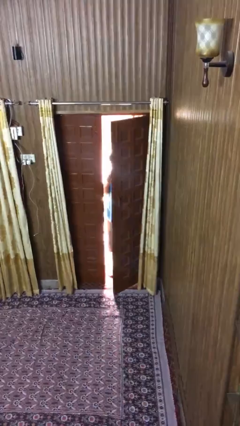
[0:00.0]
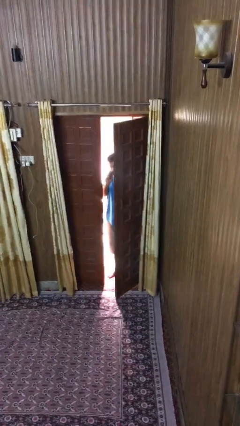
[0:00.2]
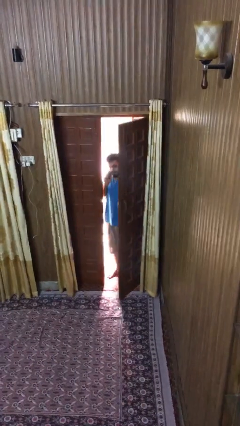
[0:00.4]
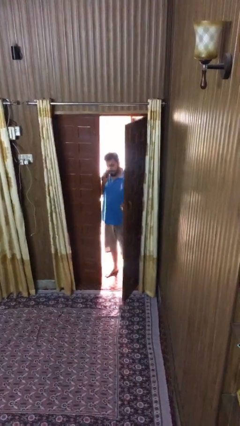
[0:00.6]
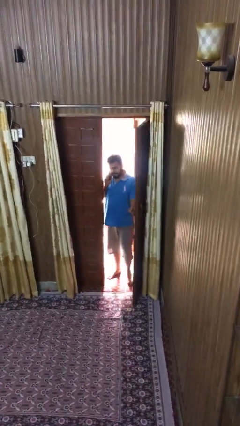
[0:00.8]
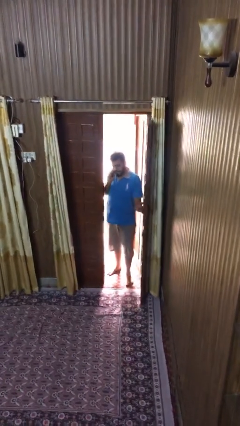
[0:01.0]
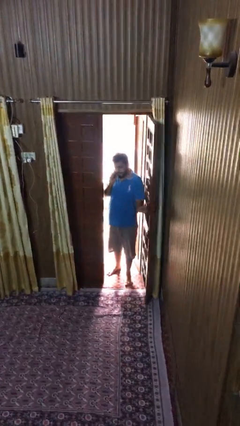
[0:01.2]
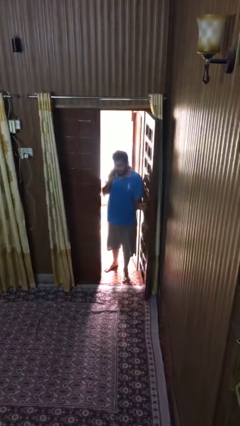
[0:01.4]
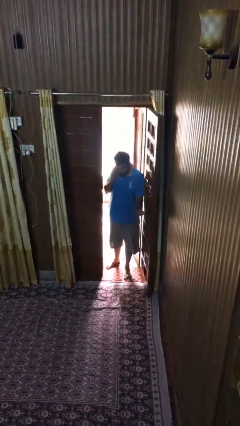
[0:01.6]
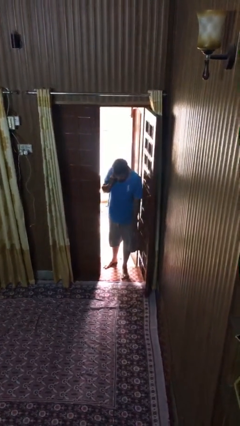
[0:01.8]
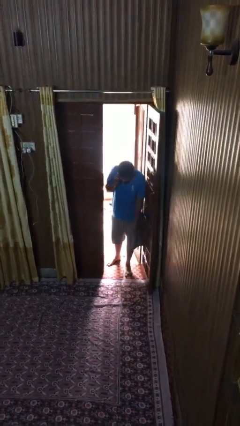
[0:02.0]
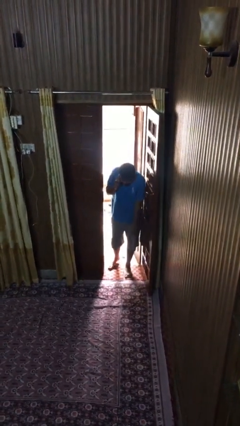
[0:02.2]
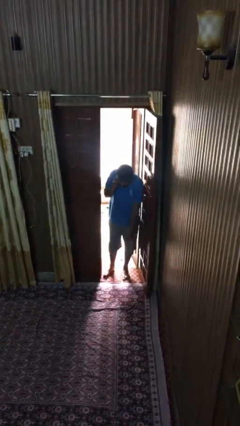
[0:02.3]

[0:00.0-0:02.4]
person opens facility door

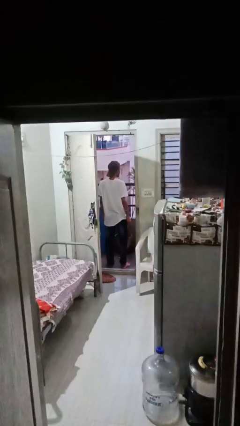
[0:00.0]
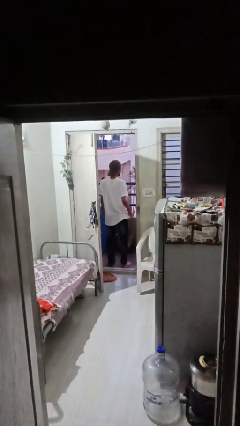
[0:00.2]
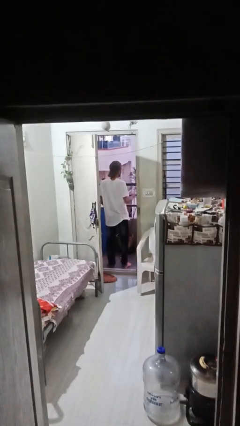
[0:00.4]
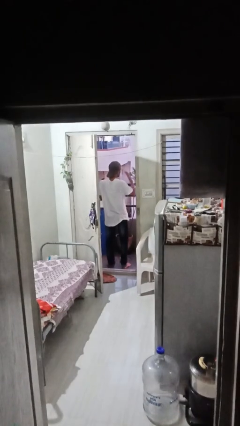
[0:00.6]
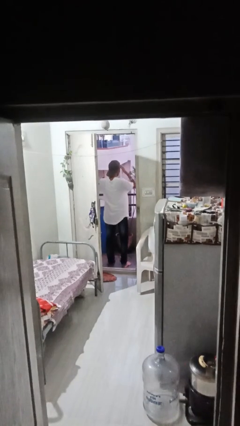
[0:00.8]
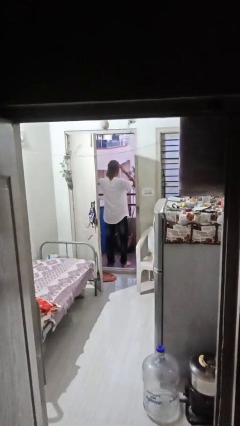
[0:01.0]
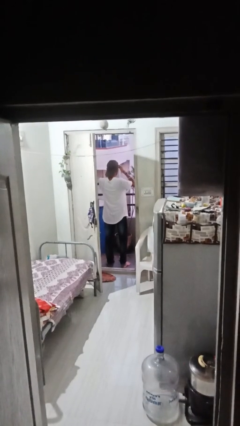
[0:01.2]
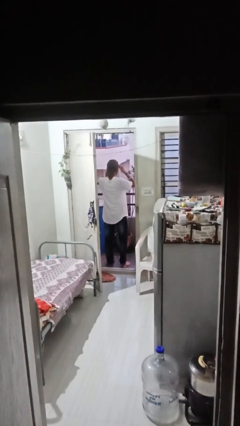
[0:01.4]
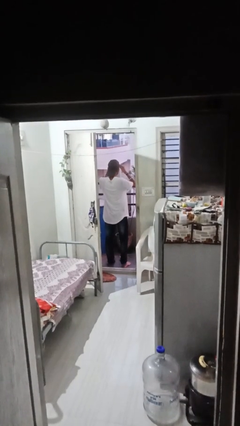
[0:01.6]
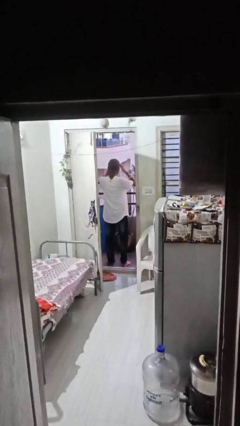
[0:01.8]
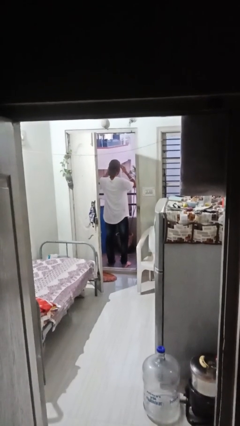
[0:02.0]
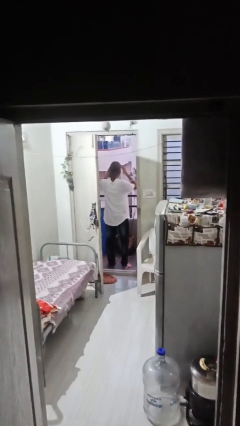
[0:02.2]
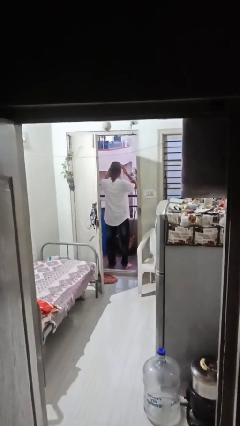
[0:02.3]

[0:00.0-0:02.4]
person shades eyes

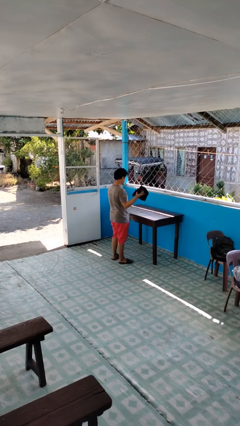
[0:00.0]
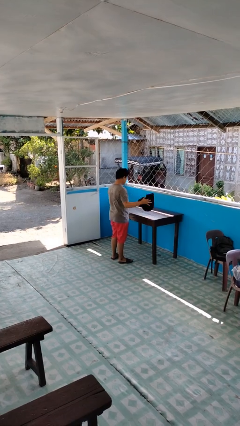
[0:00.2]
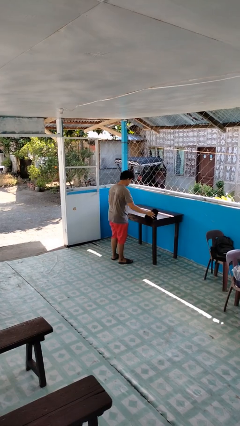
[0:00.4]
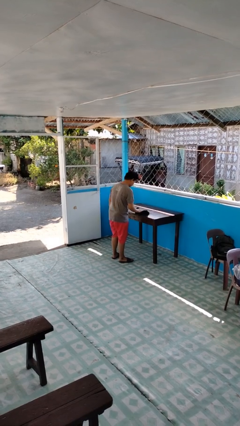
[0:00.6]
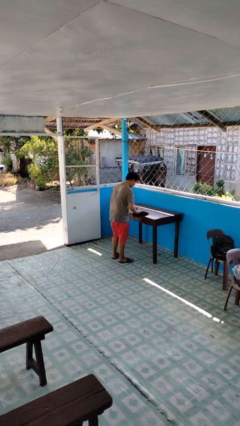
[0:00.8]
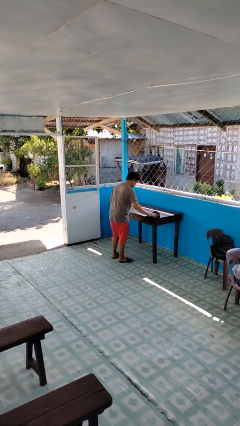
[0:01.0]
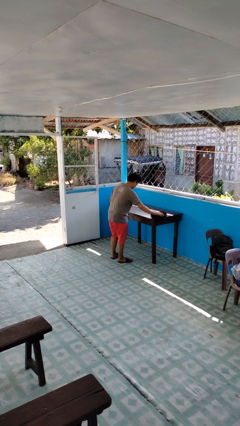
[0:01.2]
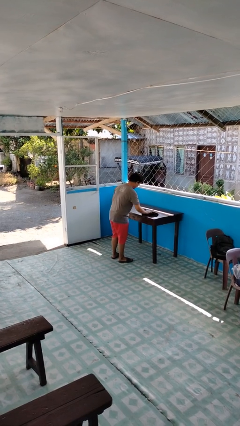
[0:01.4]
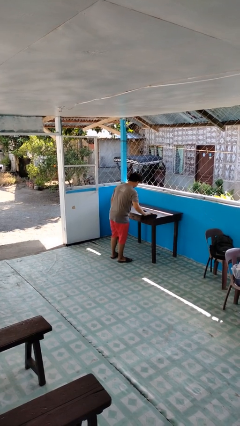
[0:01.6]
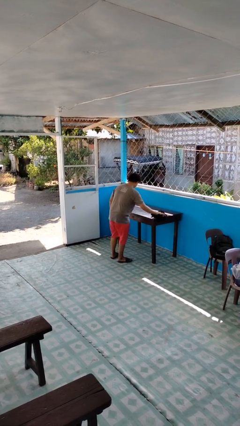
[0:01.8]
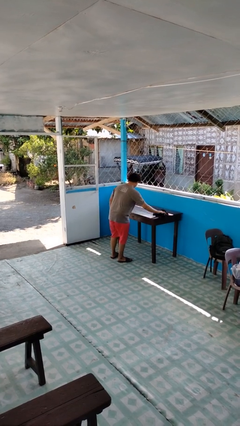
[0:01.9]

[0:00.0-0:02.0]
person cleans table with rag

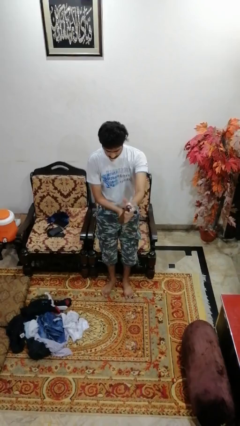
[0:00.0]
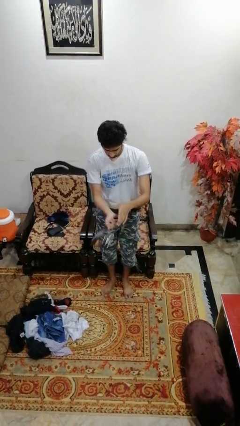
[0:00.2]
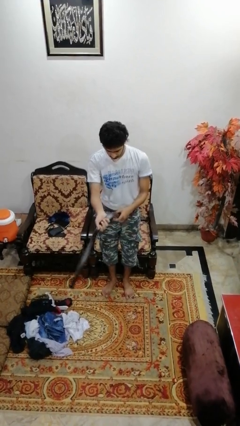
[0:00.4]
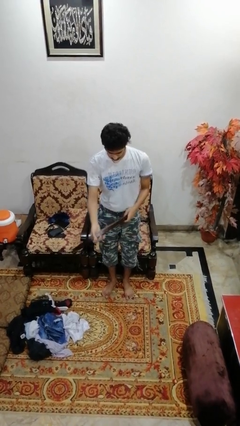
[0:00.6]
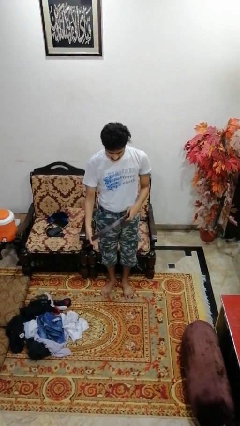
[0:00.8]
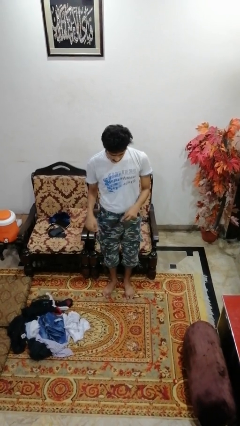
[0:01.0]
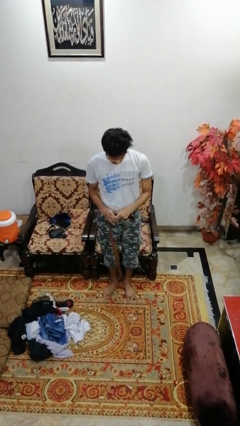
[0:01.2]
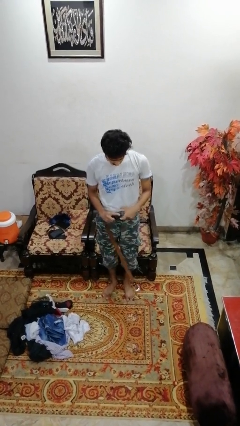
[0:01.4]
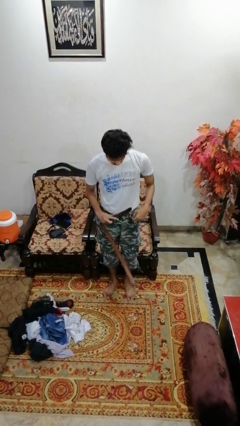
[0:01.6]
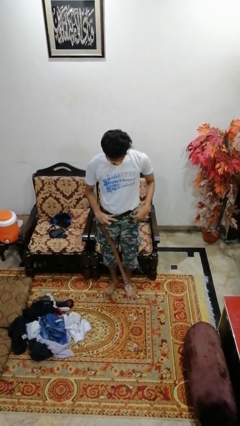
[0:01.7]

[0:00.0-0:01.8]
person takes off belt

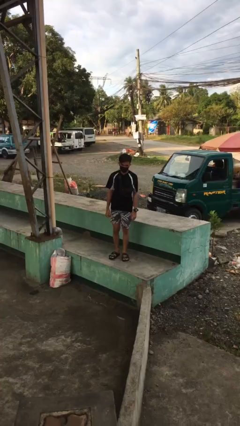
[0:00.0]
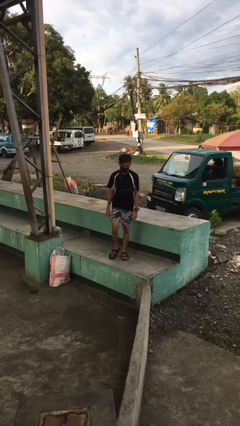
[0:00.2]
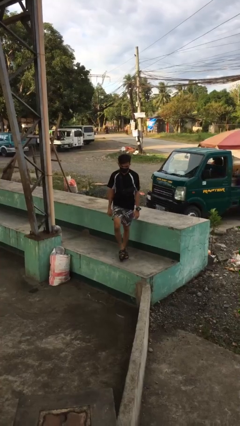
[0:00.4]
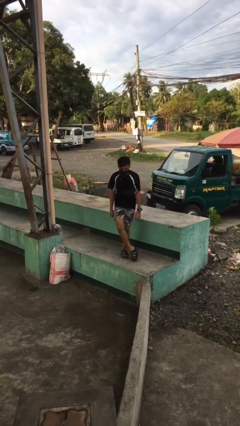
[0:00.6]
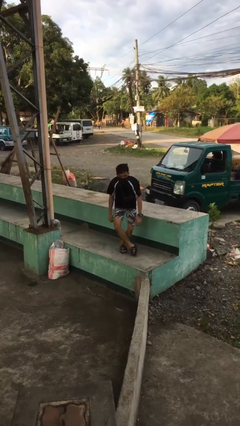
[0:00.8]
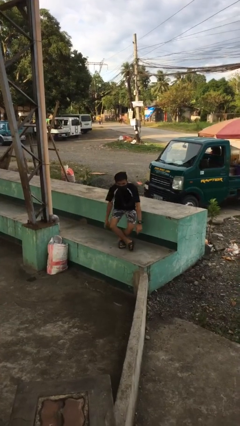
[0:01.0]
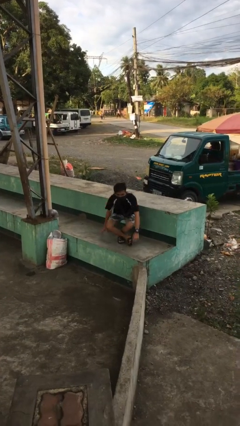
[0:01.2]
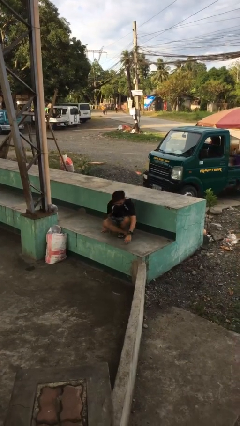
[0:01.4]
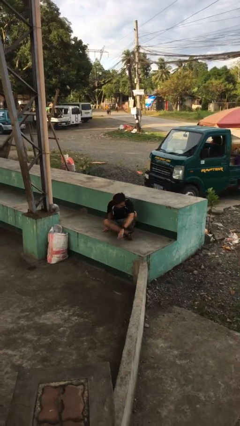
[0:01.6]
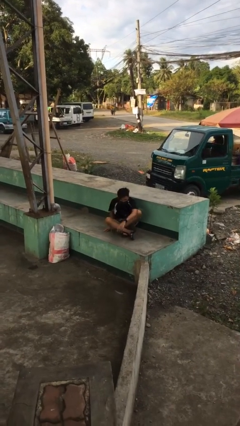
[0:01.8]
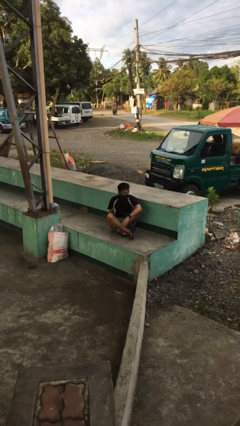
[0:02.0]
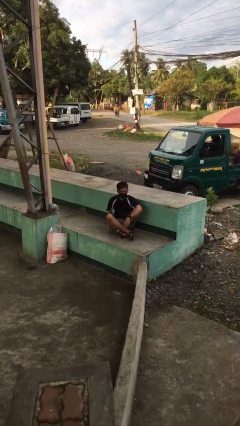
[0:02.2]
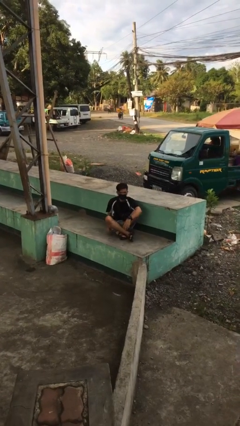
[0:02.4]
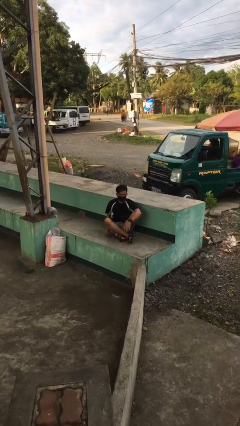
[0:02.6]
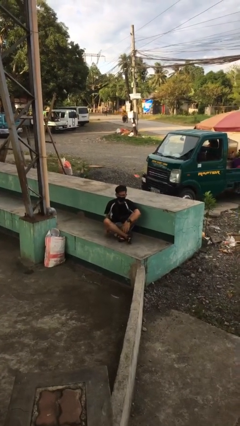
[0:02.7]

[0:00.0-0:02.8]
person sits crisscross

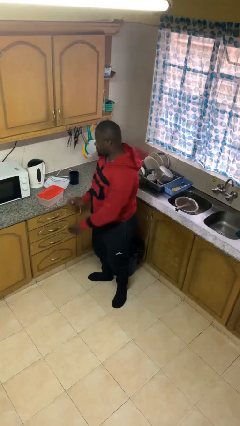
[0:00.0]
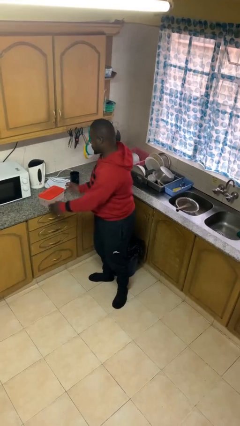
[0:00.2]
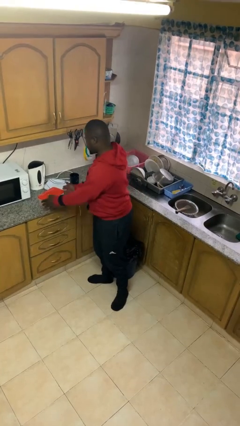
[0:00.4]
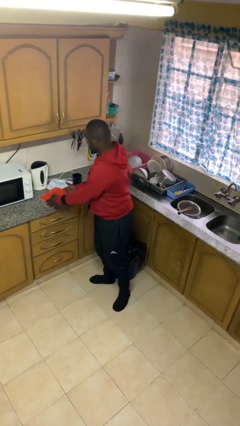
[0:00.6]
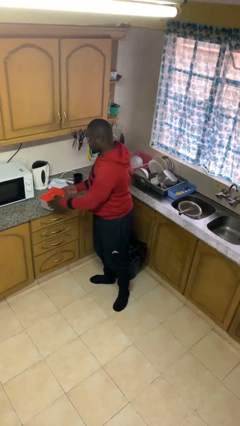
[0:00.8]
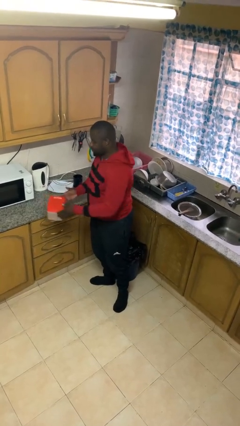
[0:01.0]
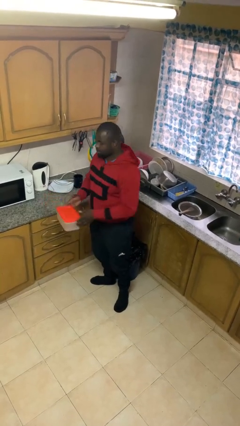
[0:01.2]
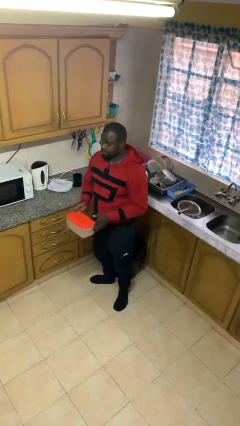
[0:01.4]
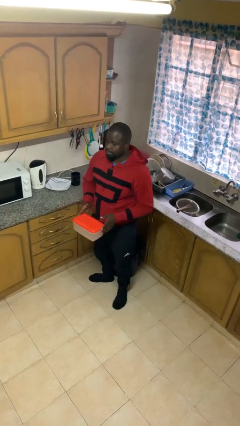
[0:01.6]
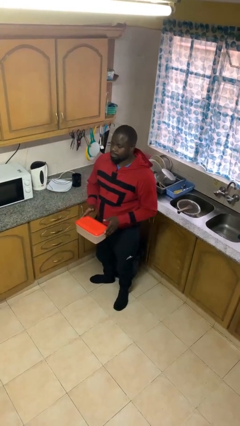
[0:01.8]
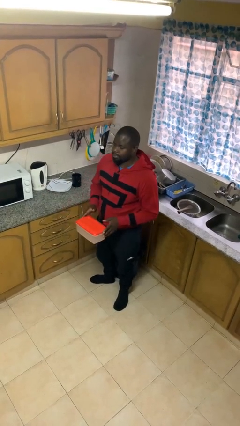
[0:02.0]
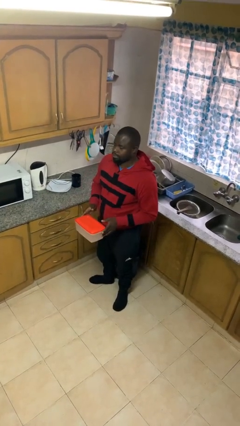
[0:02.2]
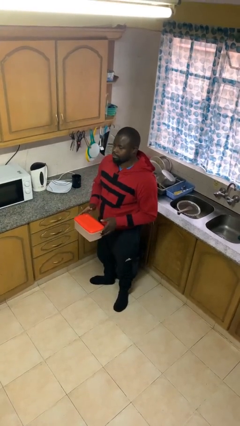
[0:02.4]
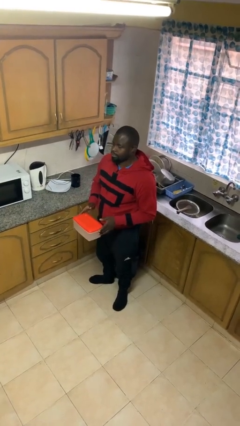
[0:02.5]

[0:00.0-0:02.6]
person picks up object from countertop

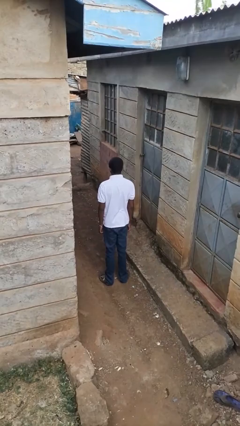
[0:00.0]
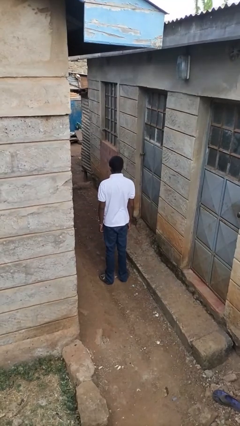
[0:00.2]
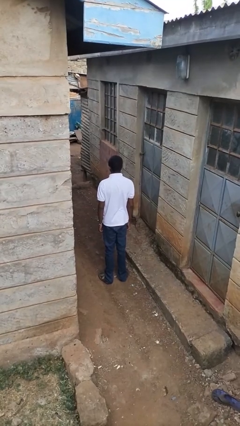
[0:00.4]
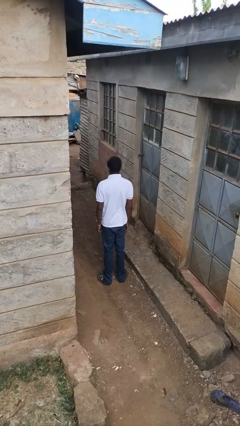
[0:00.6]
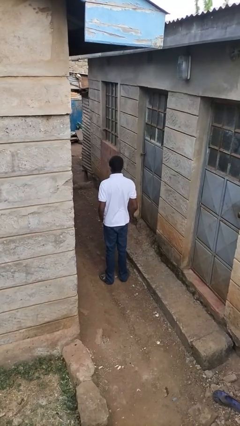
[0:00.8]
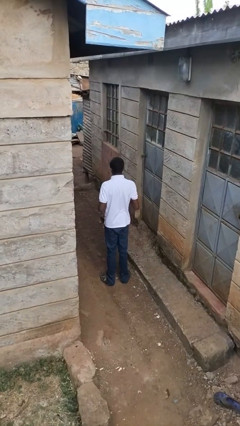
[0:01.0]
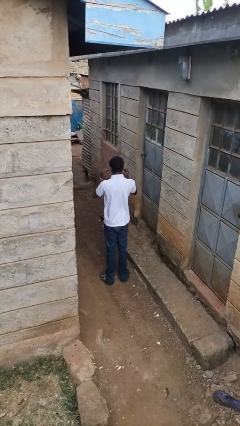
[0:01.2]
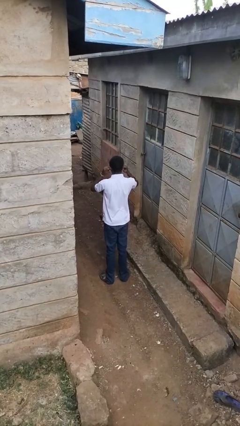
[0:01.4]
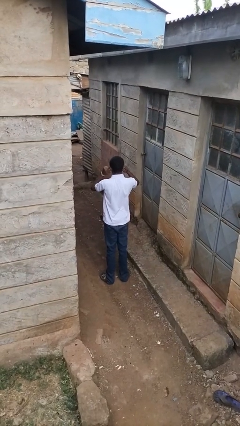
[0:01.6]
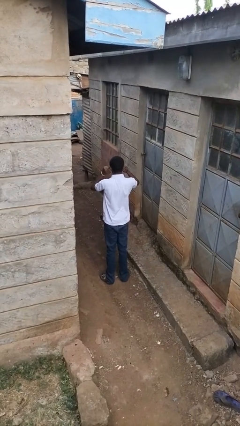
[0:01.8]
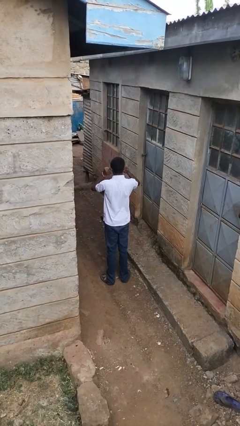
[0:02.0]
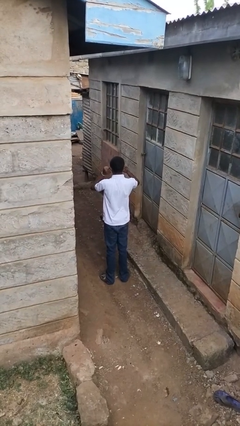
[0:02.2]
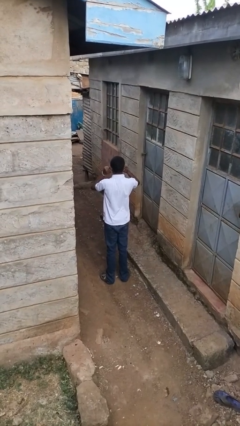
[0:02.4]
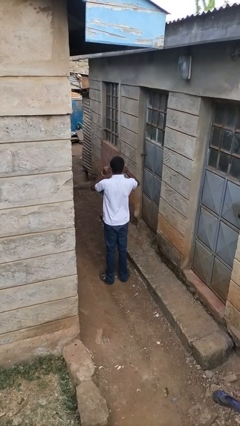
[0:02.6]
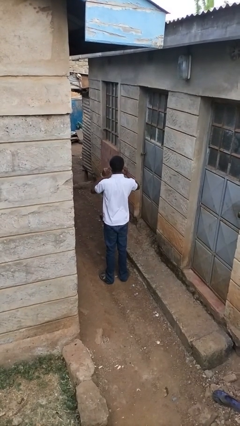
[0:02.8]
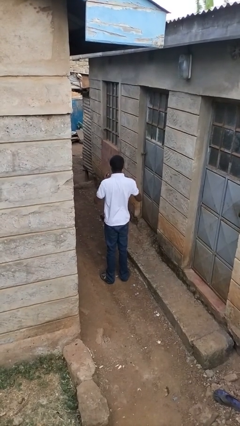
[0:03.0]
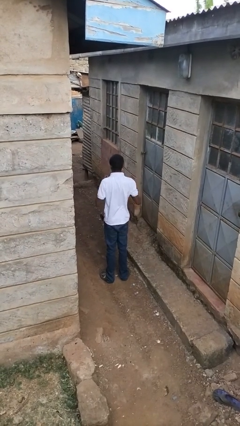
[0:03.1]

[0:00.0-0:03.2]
person puts fingers in ear
